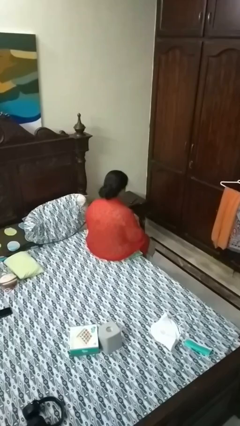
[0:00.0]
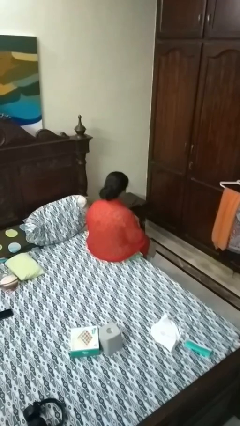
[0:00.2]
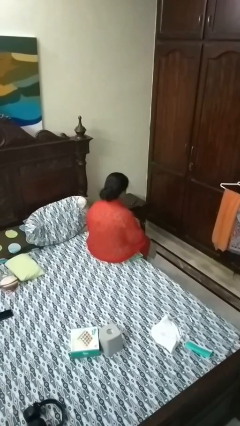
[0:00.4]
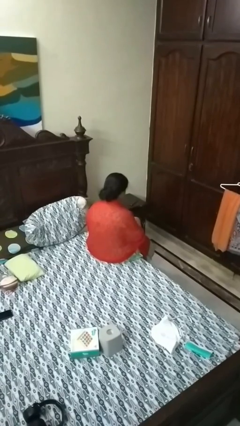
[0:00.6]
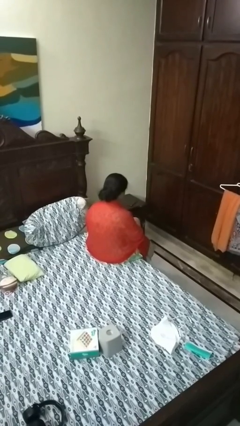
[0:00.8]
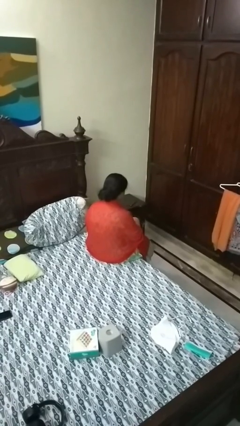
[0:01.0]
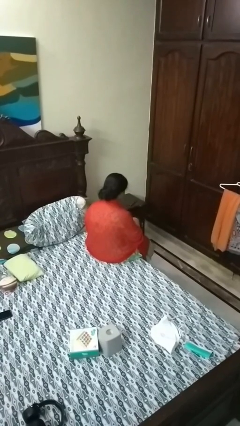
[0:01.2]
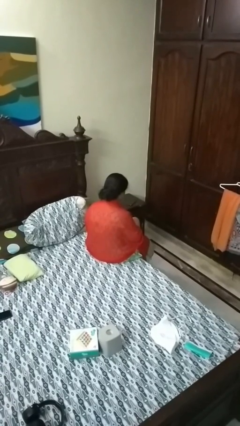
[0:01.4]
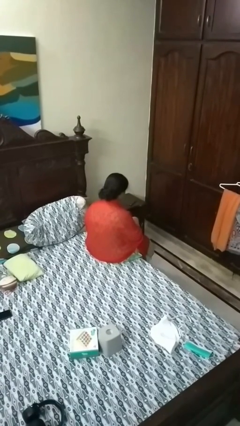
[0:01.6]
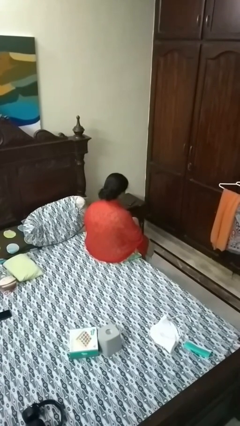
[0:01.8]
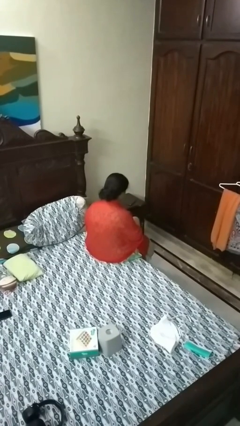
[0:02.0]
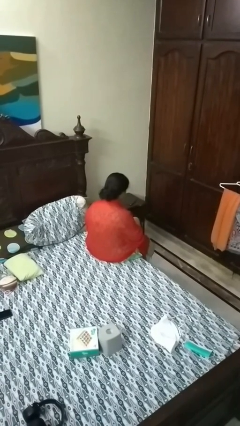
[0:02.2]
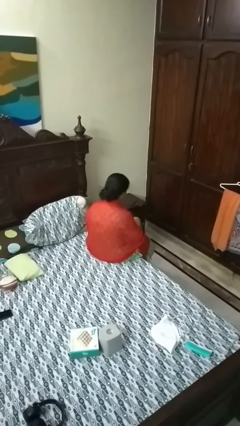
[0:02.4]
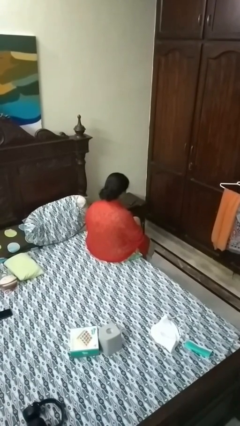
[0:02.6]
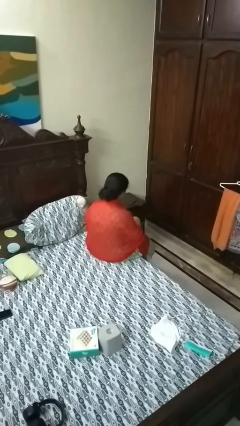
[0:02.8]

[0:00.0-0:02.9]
person searches in purse

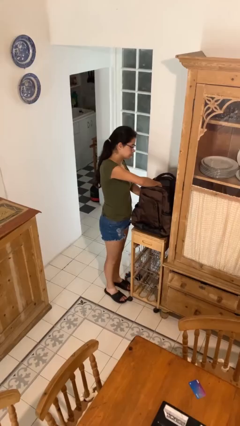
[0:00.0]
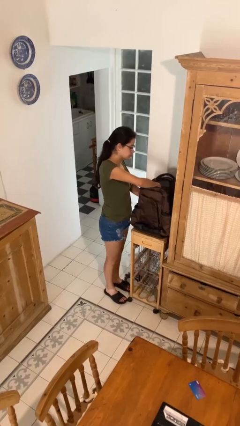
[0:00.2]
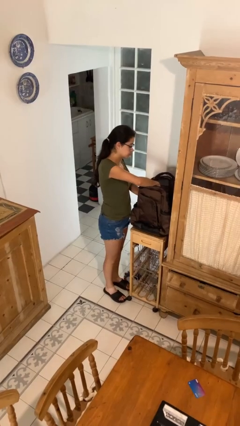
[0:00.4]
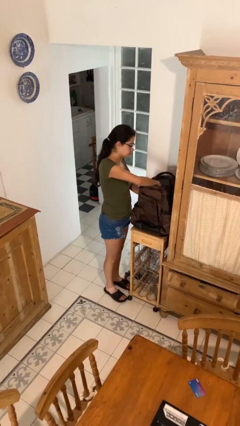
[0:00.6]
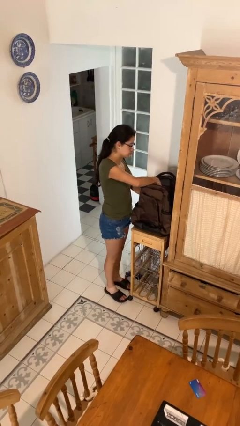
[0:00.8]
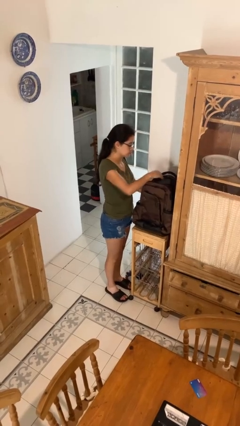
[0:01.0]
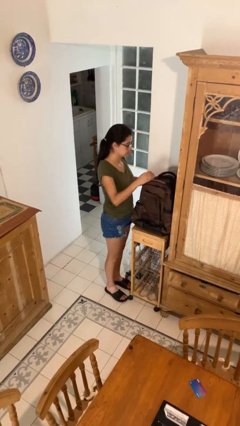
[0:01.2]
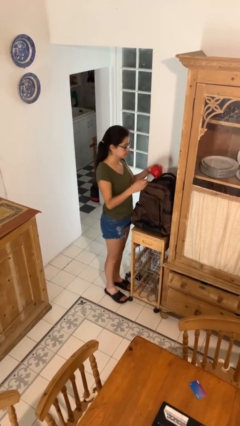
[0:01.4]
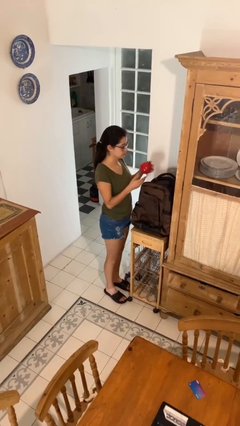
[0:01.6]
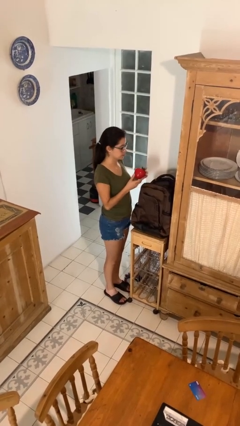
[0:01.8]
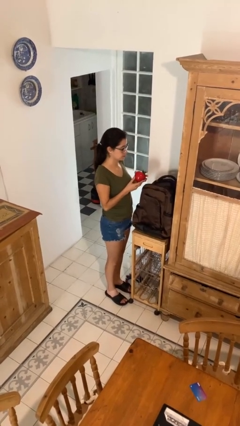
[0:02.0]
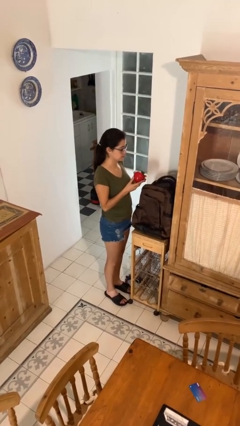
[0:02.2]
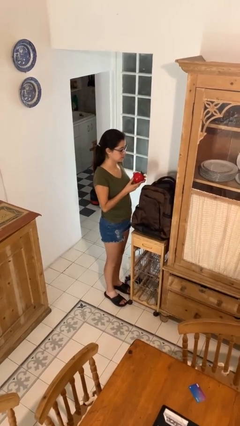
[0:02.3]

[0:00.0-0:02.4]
person takes object from backpack

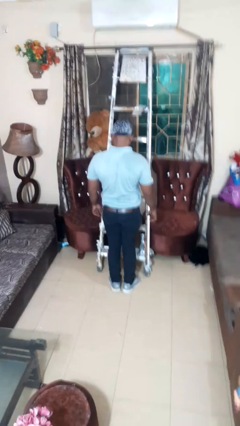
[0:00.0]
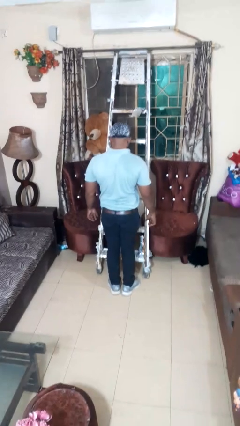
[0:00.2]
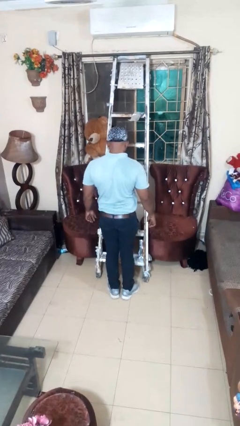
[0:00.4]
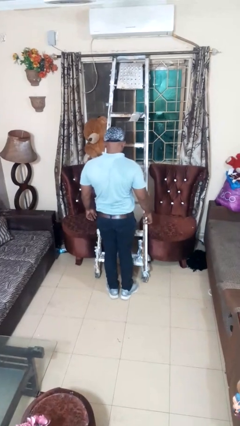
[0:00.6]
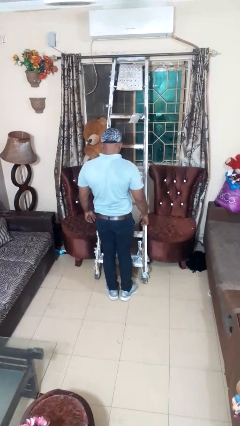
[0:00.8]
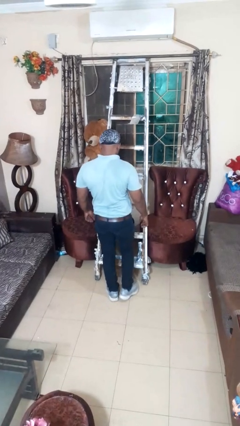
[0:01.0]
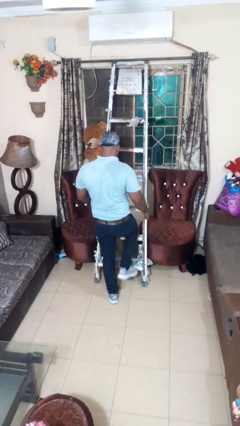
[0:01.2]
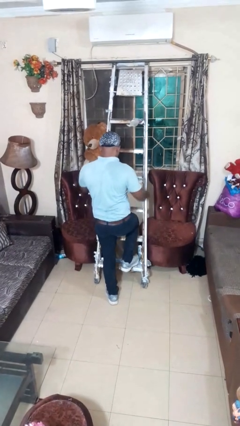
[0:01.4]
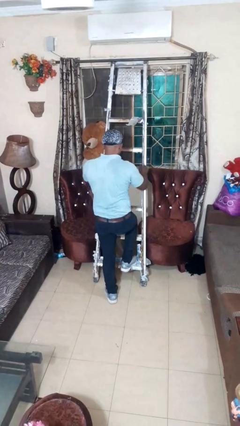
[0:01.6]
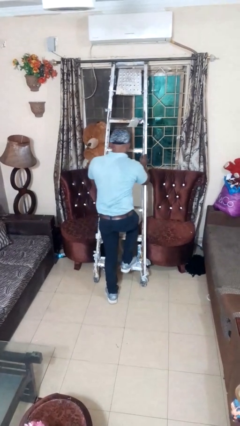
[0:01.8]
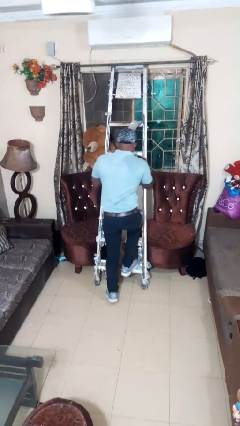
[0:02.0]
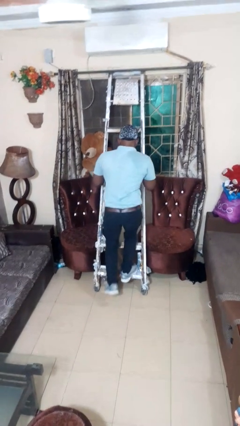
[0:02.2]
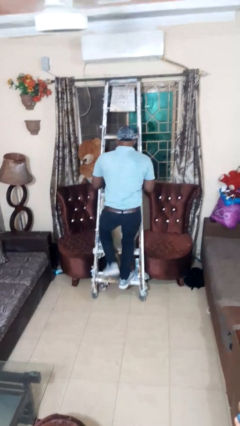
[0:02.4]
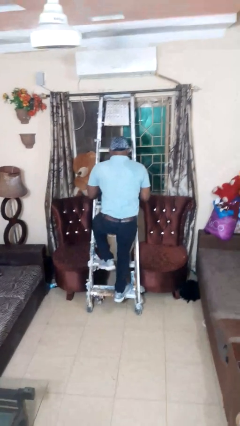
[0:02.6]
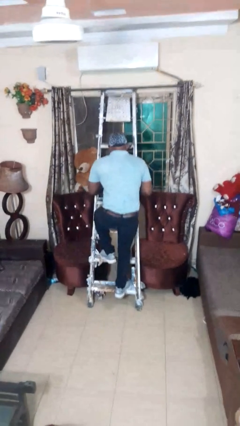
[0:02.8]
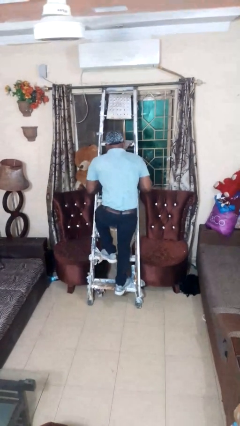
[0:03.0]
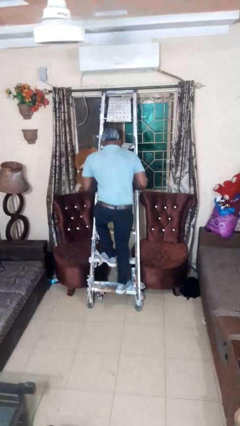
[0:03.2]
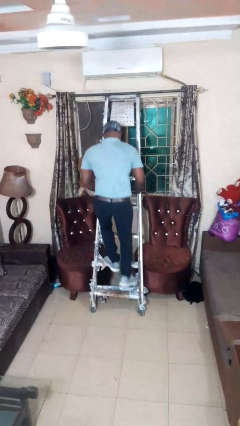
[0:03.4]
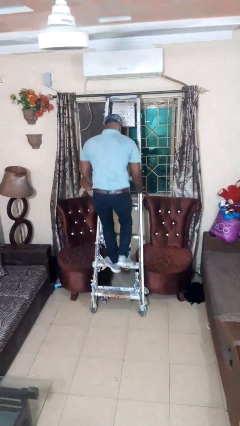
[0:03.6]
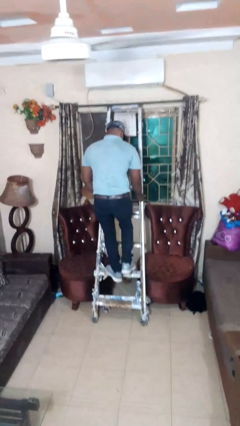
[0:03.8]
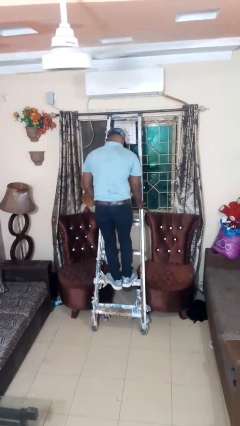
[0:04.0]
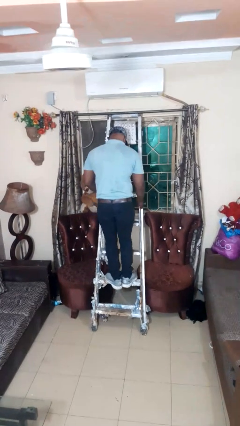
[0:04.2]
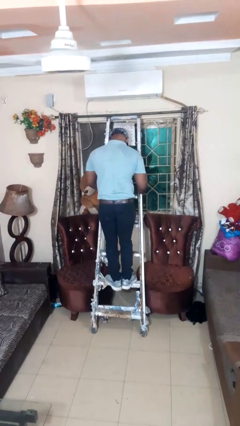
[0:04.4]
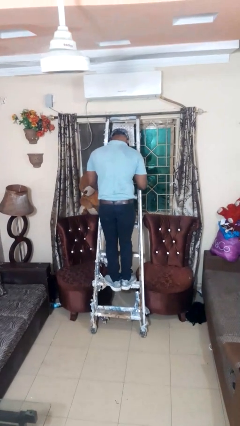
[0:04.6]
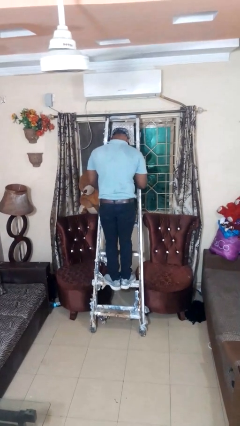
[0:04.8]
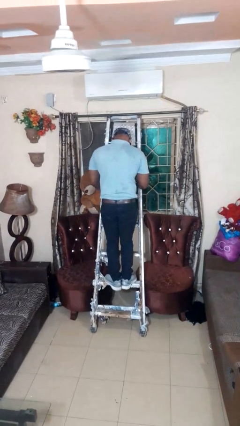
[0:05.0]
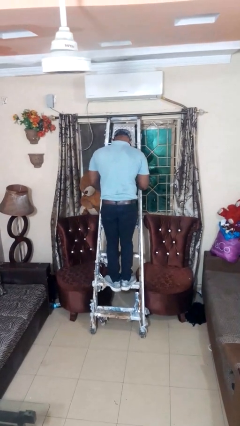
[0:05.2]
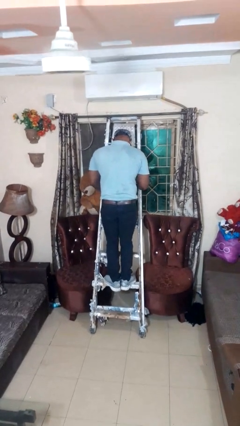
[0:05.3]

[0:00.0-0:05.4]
person climbs up ladder

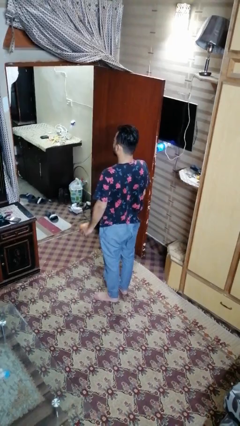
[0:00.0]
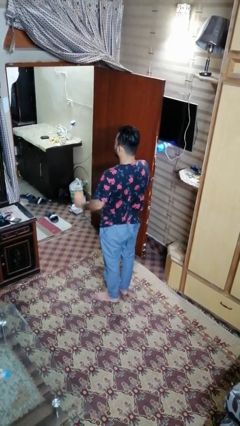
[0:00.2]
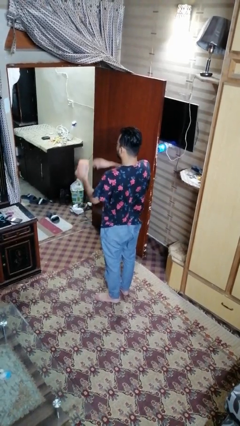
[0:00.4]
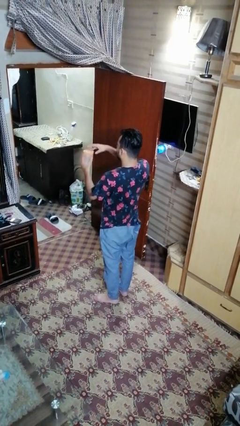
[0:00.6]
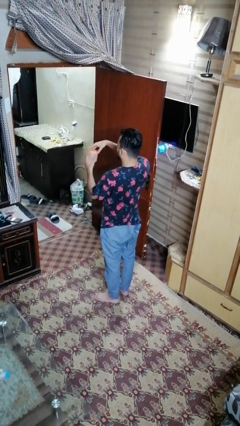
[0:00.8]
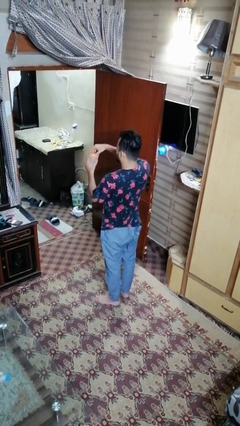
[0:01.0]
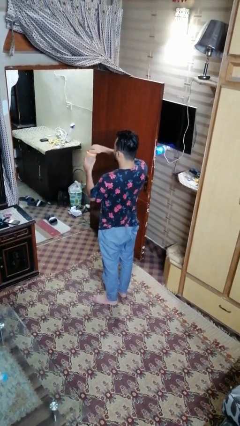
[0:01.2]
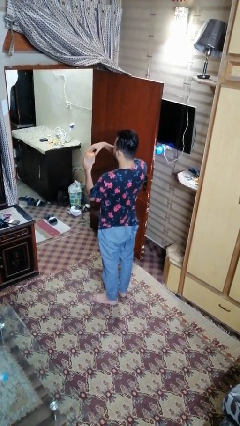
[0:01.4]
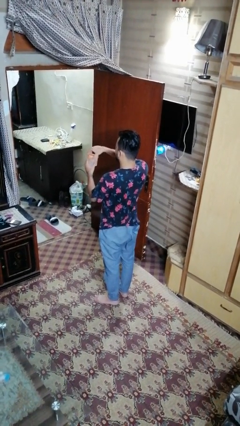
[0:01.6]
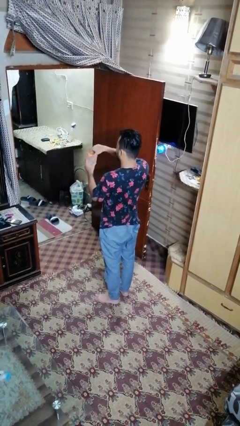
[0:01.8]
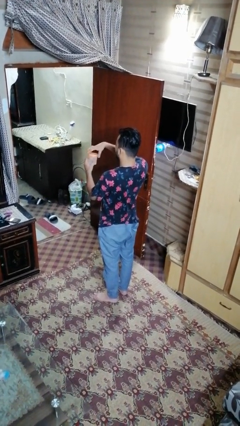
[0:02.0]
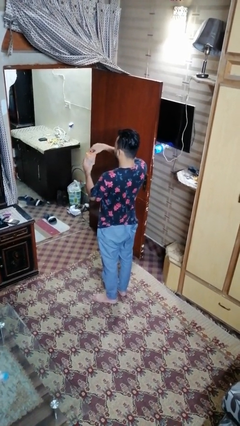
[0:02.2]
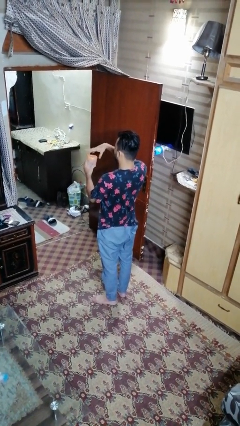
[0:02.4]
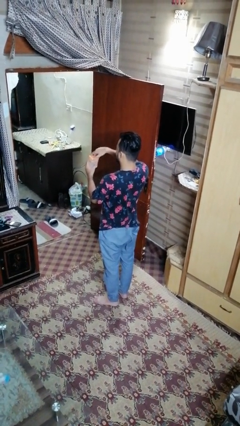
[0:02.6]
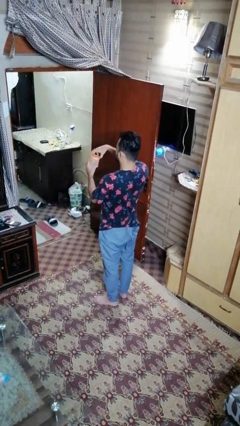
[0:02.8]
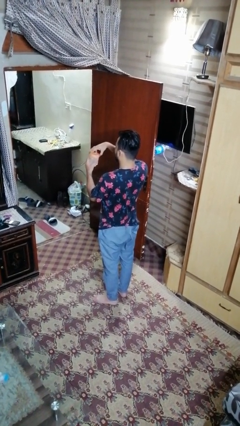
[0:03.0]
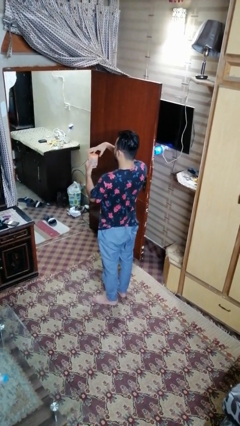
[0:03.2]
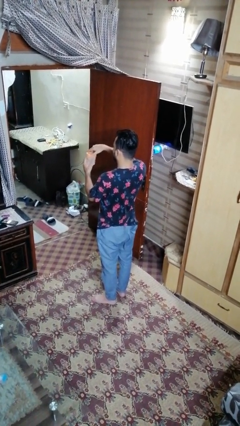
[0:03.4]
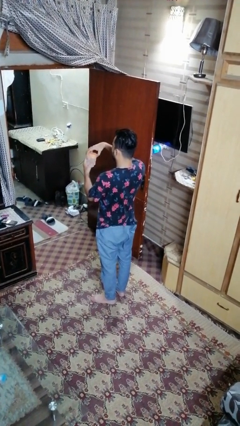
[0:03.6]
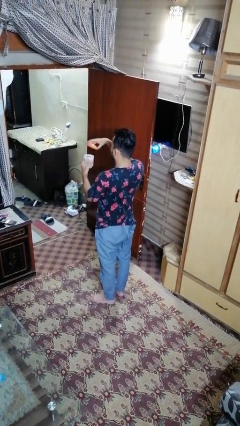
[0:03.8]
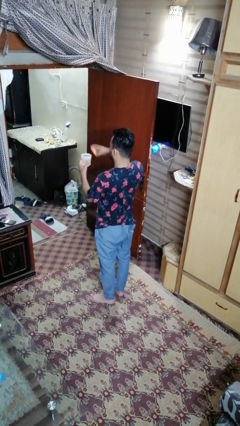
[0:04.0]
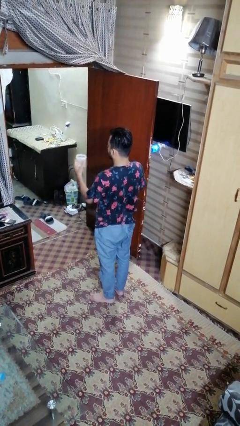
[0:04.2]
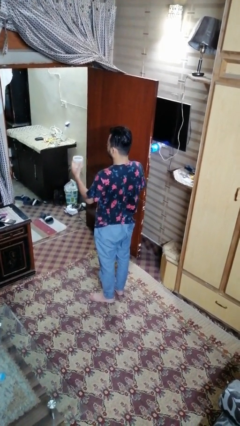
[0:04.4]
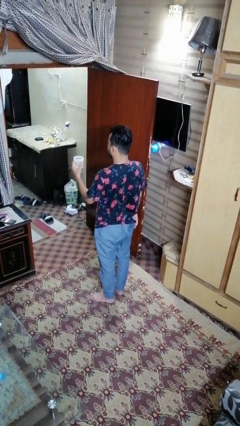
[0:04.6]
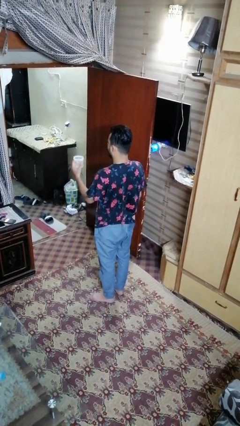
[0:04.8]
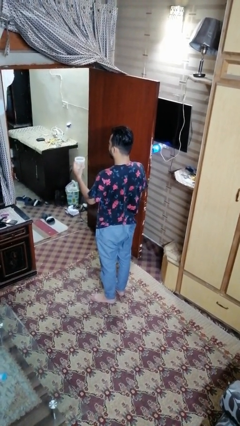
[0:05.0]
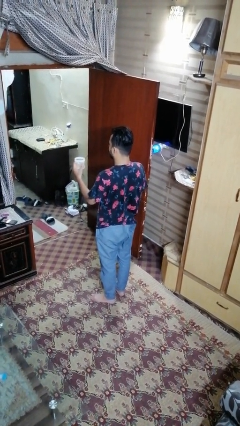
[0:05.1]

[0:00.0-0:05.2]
person opens jar

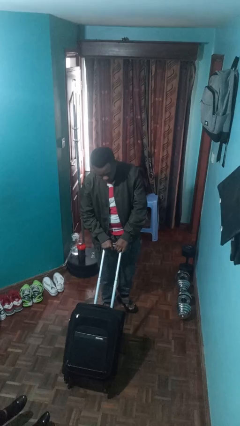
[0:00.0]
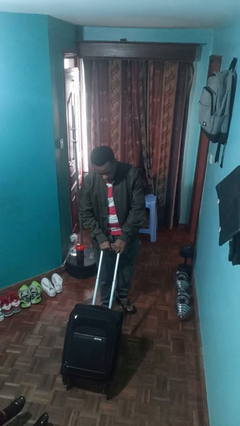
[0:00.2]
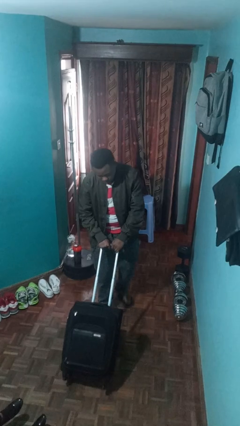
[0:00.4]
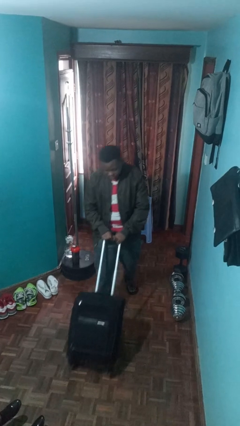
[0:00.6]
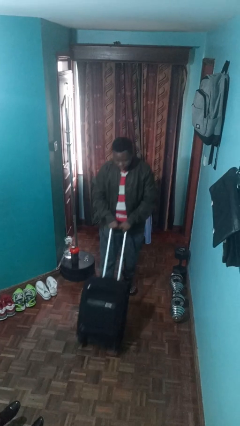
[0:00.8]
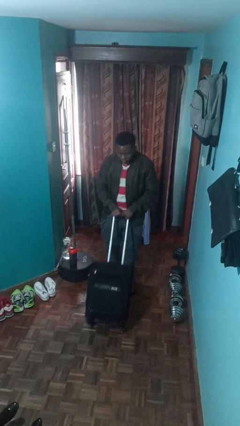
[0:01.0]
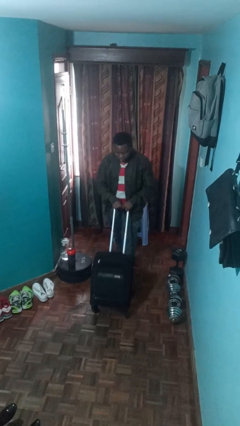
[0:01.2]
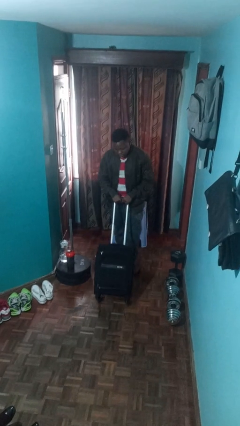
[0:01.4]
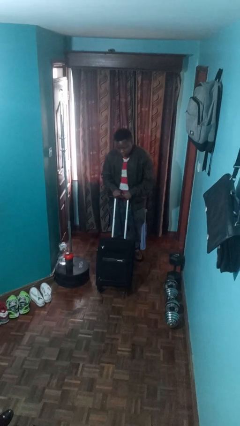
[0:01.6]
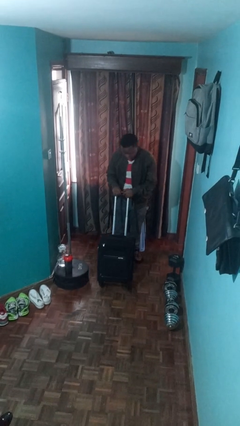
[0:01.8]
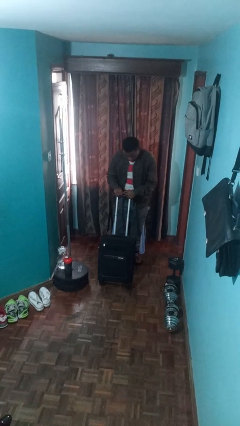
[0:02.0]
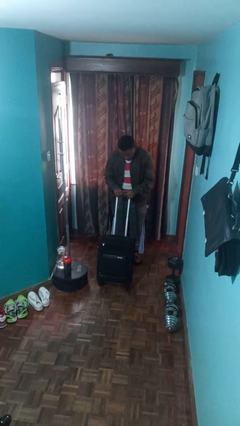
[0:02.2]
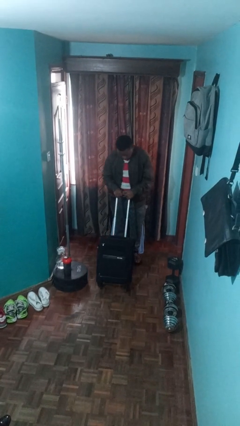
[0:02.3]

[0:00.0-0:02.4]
person pulls wheeled cart
